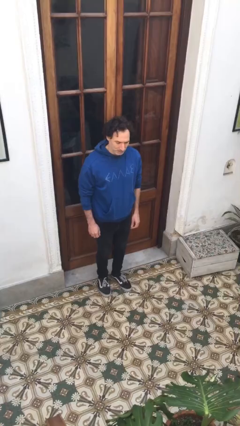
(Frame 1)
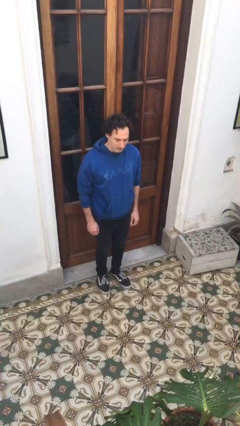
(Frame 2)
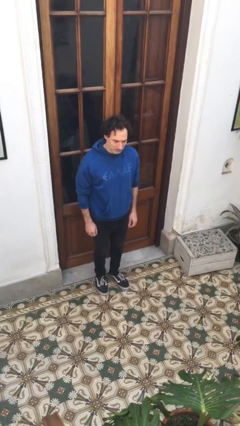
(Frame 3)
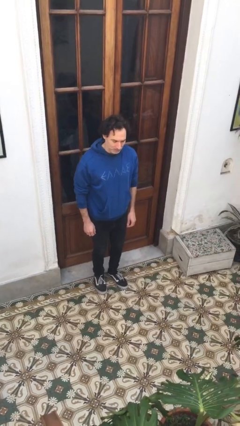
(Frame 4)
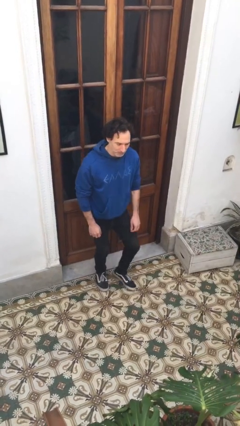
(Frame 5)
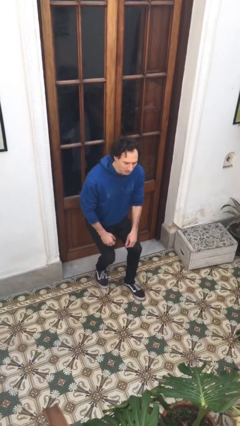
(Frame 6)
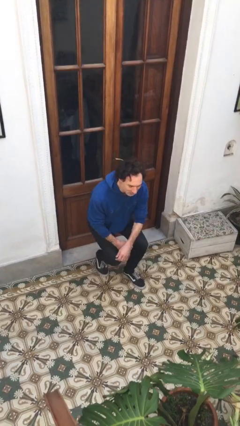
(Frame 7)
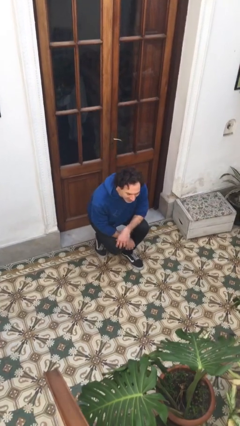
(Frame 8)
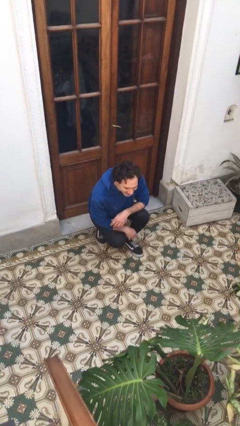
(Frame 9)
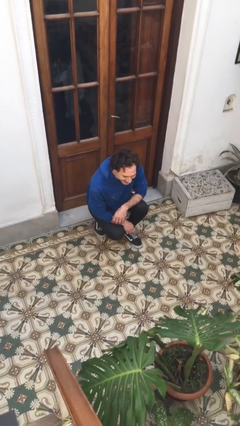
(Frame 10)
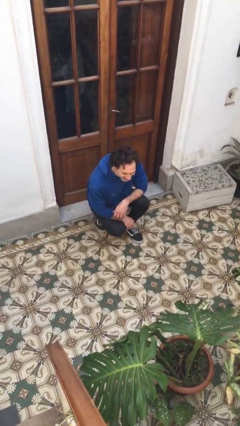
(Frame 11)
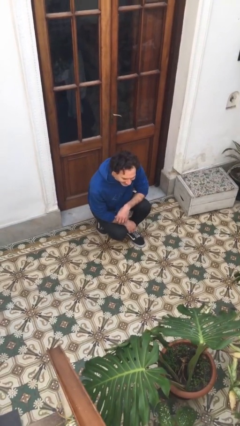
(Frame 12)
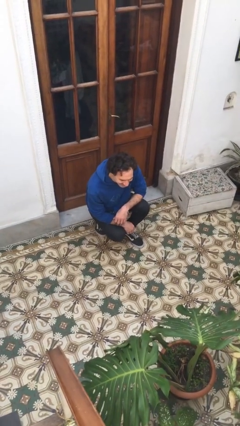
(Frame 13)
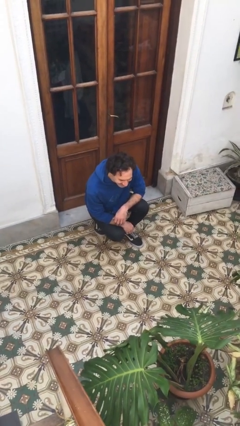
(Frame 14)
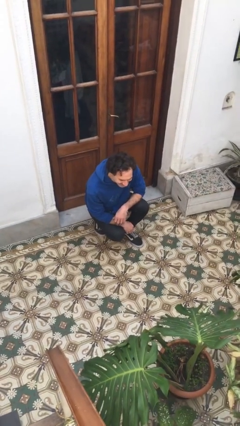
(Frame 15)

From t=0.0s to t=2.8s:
person squats

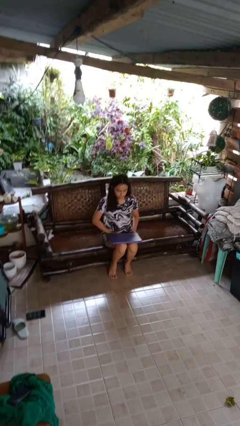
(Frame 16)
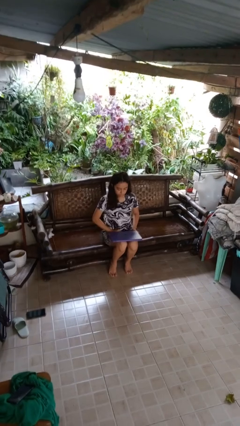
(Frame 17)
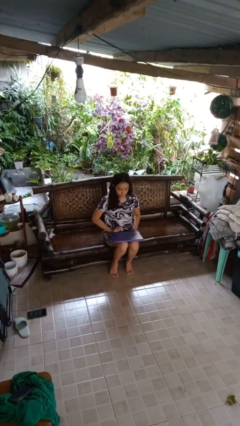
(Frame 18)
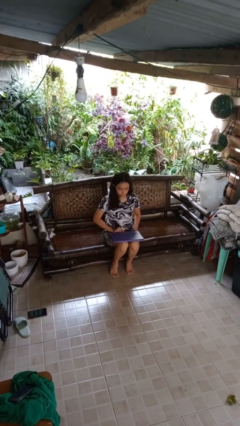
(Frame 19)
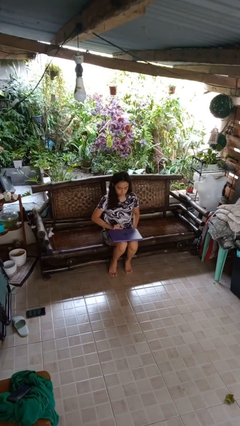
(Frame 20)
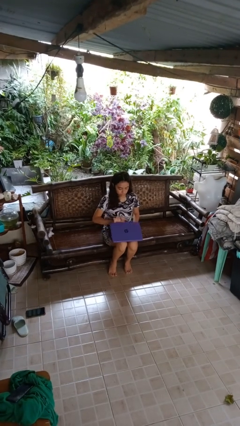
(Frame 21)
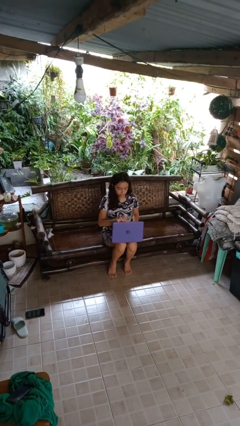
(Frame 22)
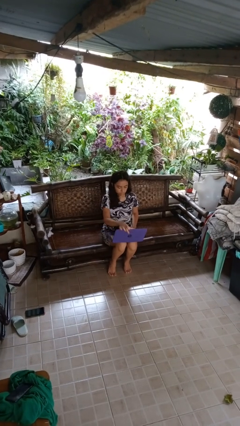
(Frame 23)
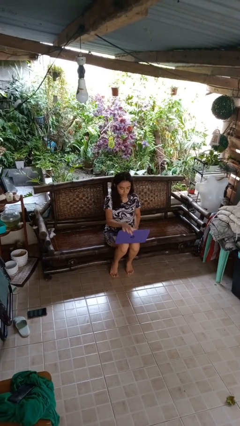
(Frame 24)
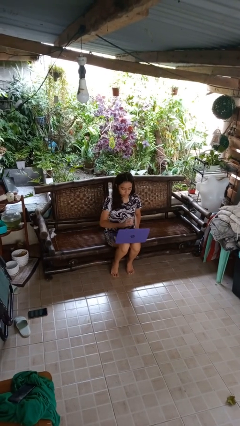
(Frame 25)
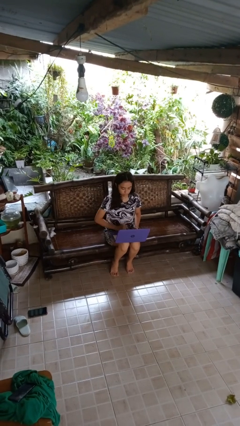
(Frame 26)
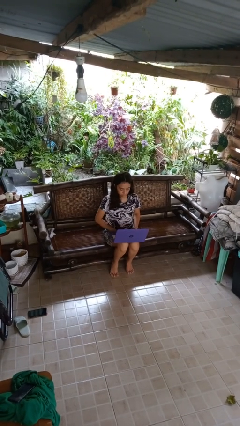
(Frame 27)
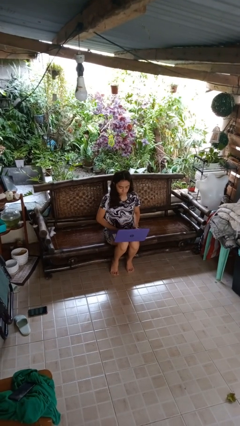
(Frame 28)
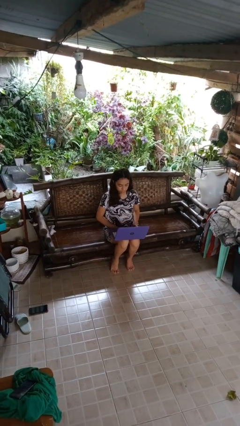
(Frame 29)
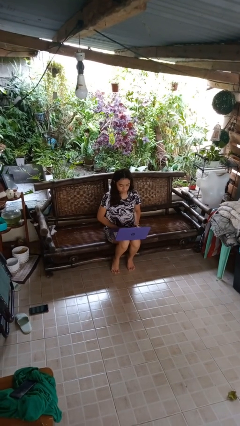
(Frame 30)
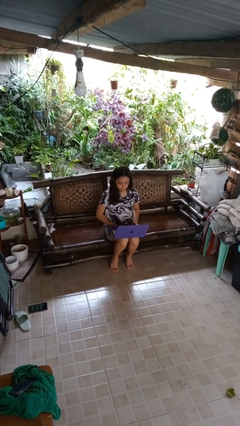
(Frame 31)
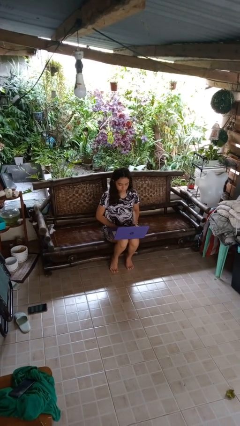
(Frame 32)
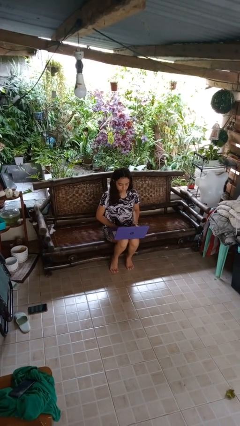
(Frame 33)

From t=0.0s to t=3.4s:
person opens laptop

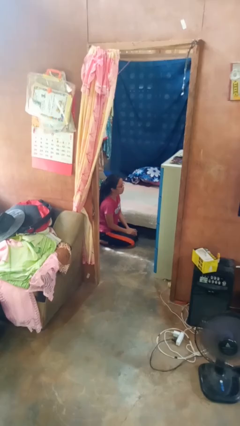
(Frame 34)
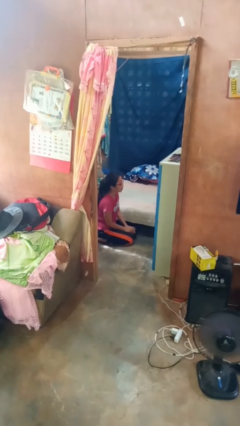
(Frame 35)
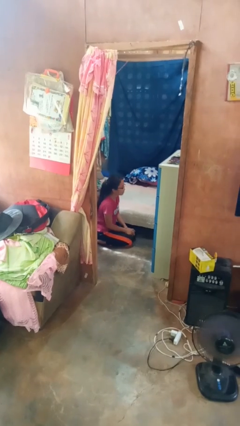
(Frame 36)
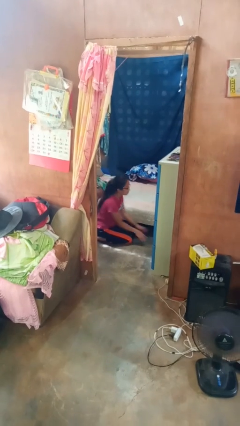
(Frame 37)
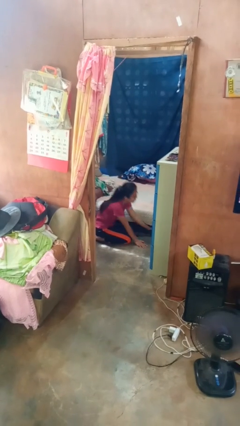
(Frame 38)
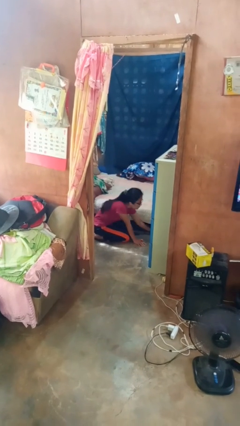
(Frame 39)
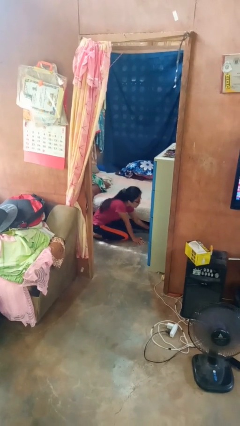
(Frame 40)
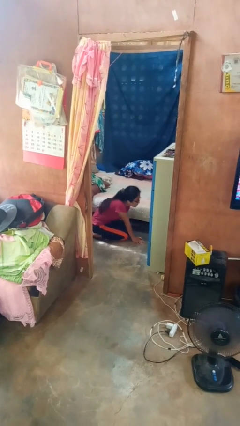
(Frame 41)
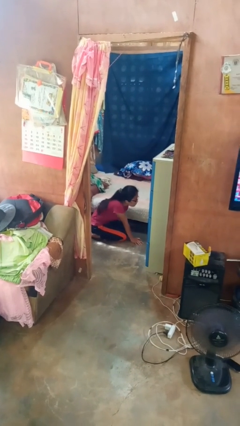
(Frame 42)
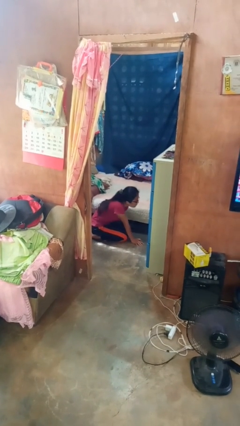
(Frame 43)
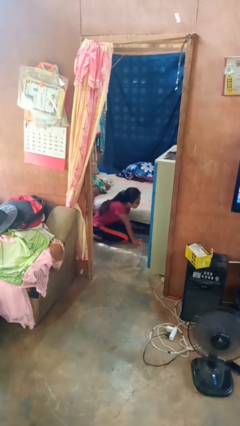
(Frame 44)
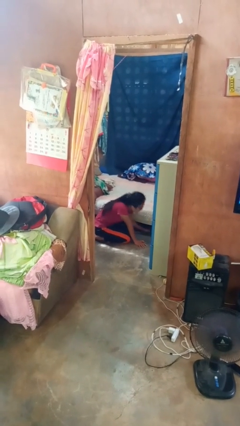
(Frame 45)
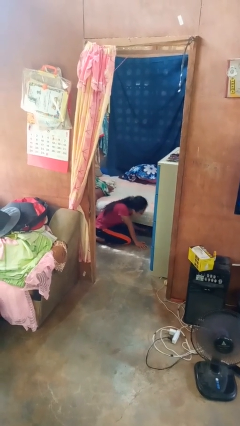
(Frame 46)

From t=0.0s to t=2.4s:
person searches under bed

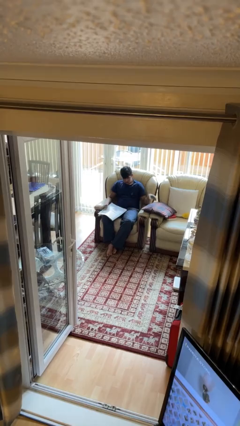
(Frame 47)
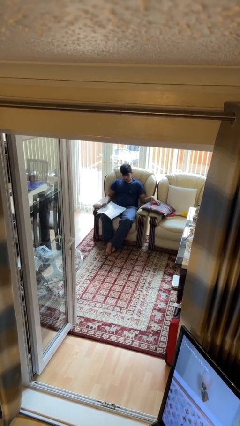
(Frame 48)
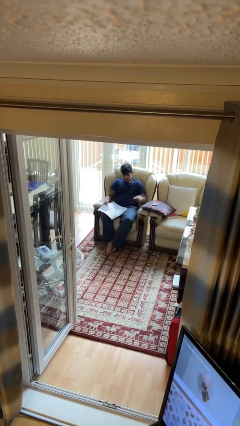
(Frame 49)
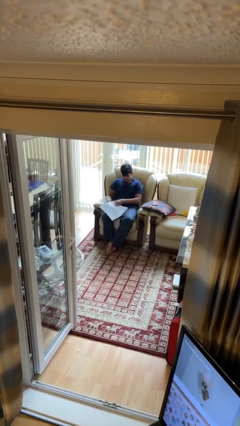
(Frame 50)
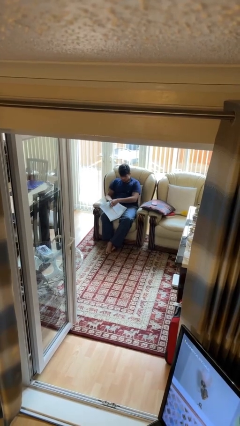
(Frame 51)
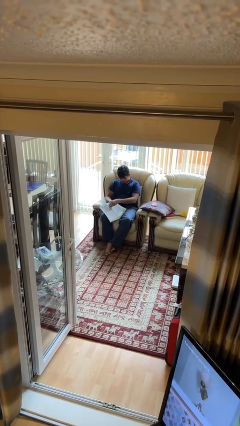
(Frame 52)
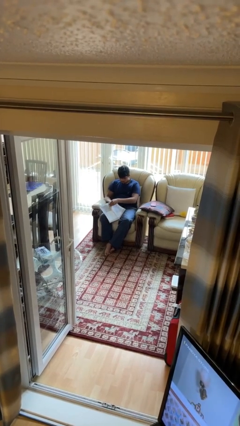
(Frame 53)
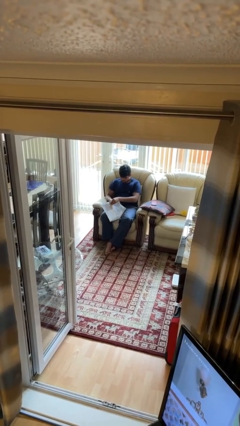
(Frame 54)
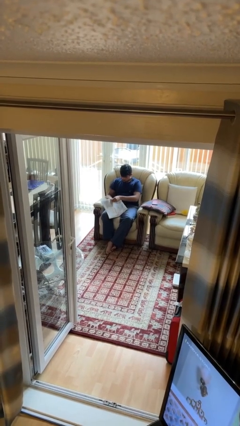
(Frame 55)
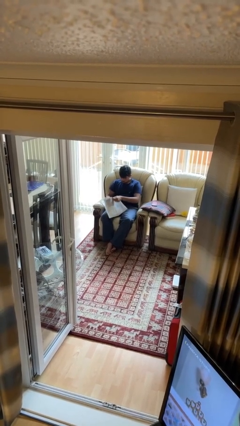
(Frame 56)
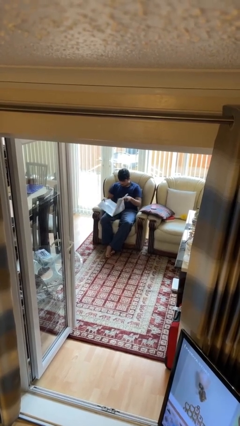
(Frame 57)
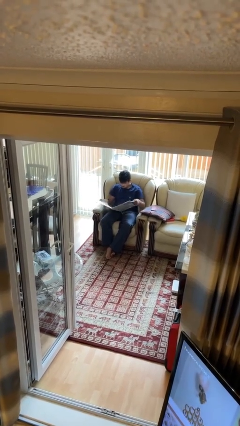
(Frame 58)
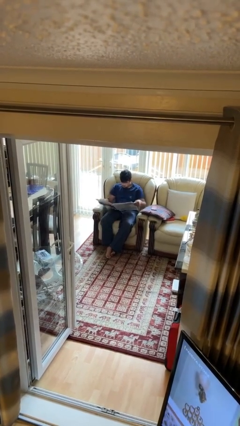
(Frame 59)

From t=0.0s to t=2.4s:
person reads newspaper

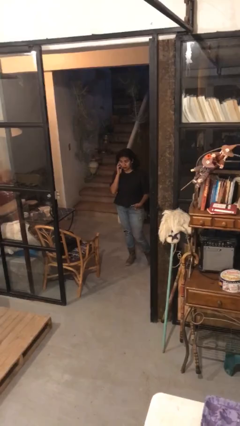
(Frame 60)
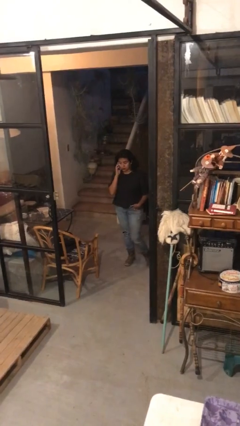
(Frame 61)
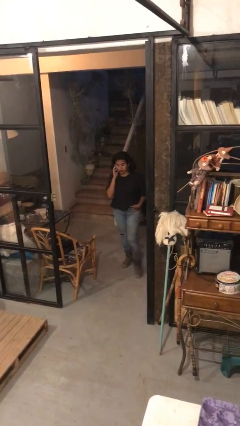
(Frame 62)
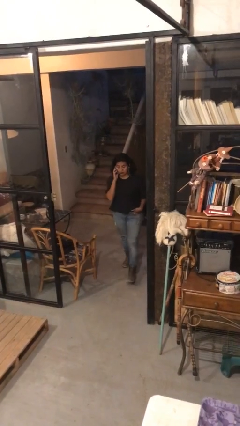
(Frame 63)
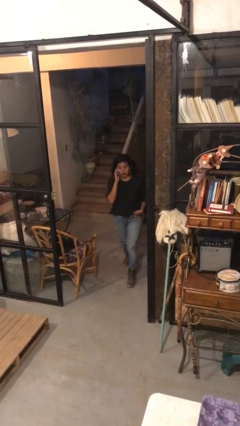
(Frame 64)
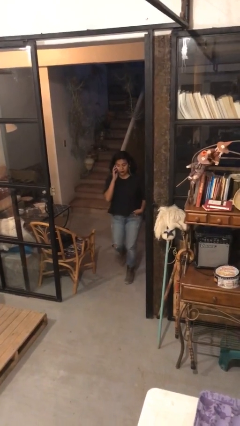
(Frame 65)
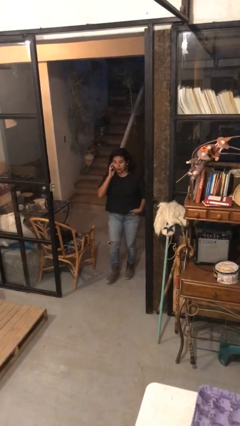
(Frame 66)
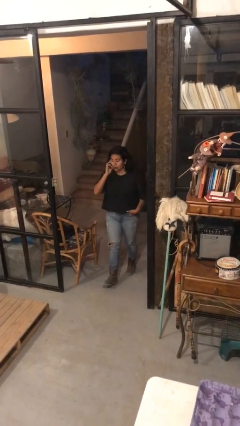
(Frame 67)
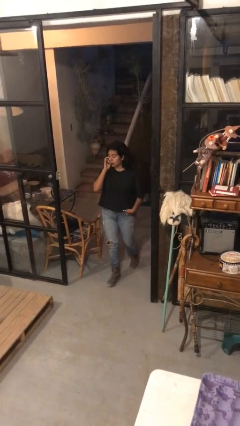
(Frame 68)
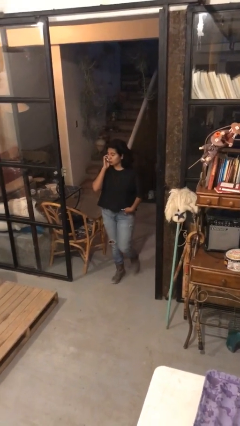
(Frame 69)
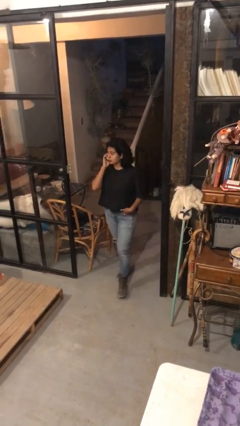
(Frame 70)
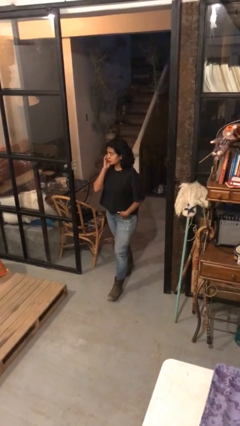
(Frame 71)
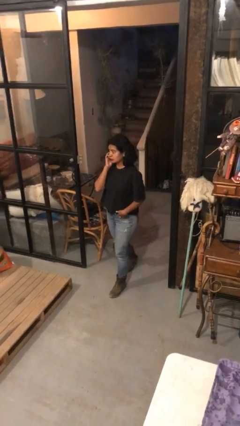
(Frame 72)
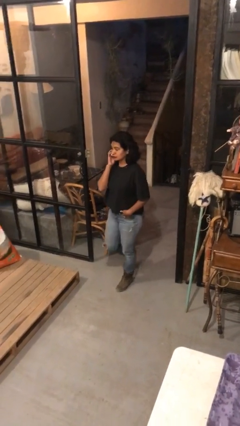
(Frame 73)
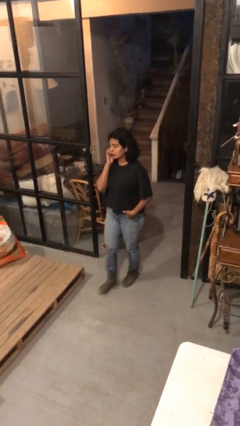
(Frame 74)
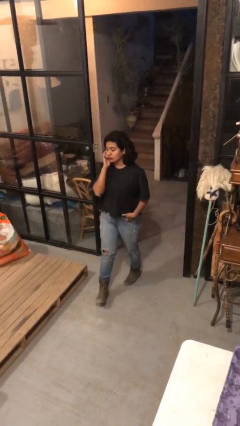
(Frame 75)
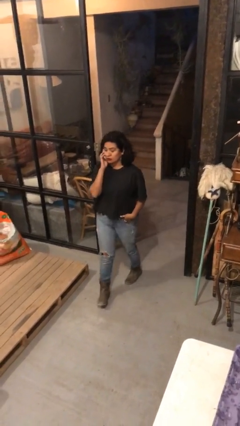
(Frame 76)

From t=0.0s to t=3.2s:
person enters scene through structure

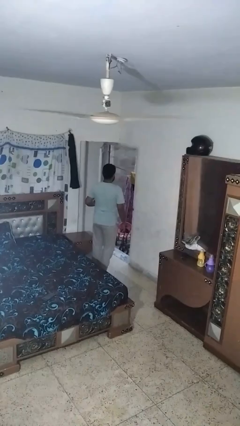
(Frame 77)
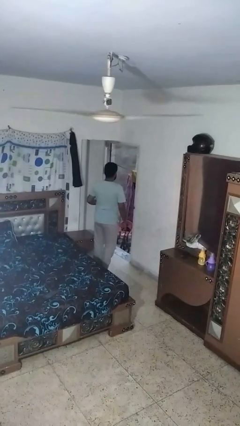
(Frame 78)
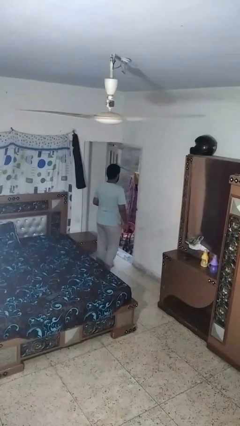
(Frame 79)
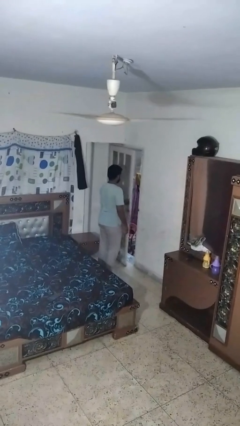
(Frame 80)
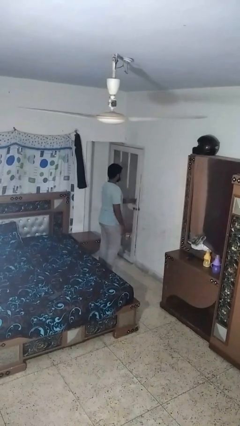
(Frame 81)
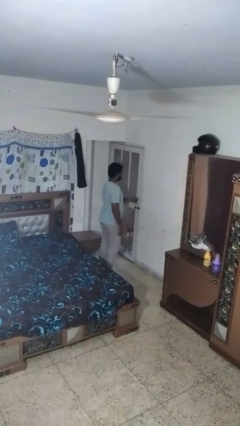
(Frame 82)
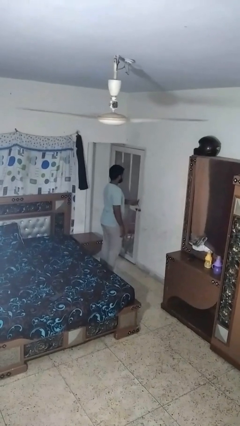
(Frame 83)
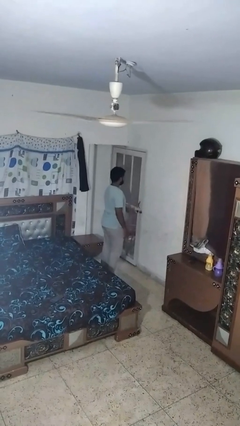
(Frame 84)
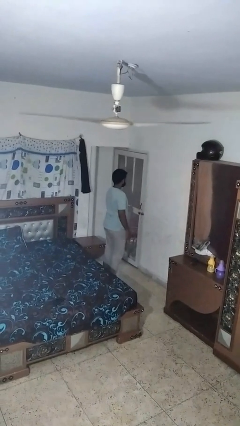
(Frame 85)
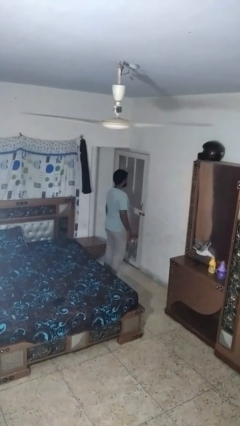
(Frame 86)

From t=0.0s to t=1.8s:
person closes gate

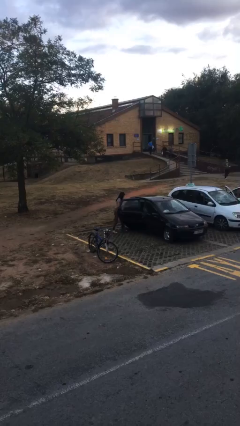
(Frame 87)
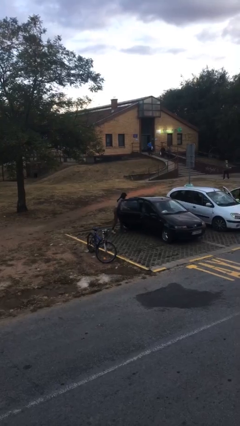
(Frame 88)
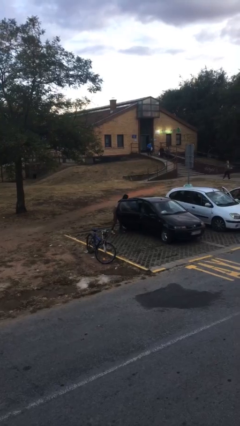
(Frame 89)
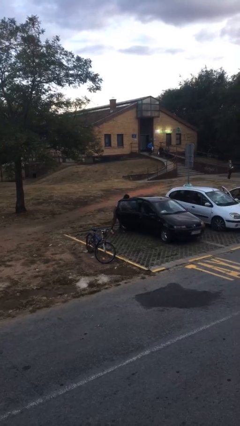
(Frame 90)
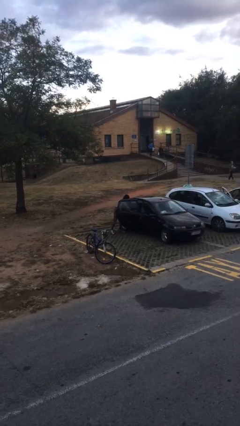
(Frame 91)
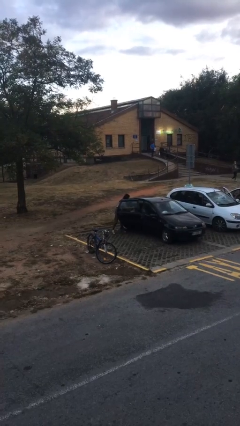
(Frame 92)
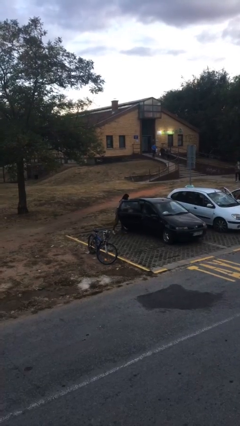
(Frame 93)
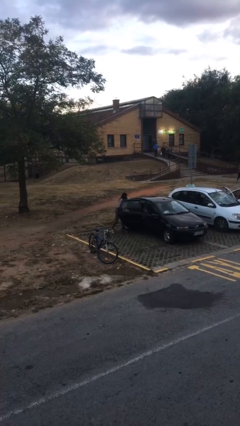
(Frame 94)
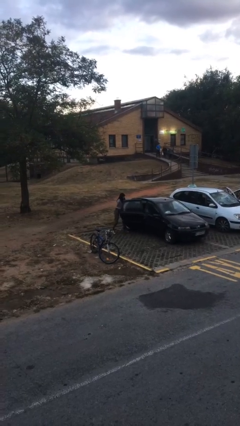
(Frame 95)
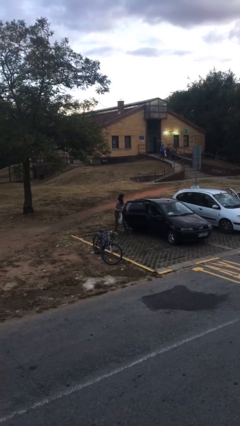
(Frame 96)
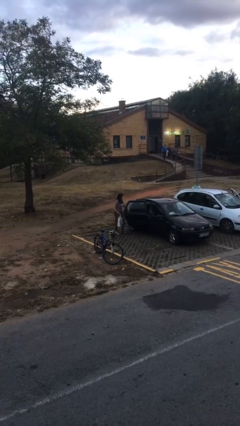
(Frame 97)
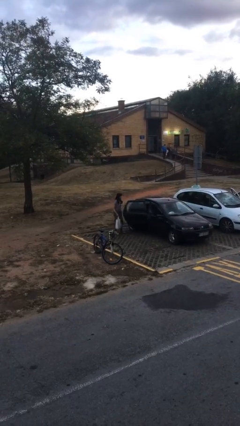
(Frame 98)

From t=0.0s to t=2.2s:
person unloads car
